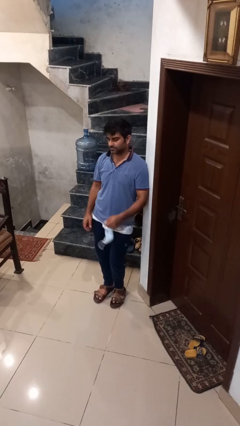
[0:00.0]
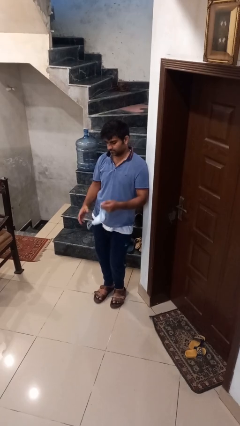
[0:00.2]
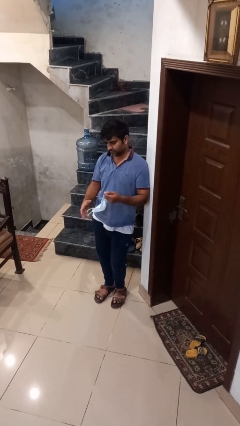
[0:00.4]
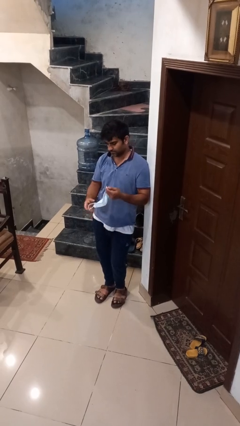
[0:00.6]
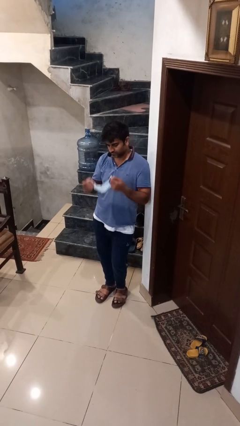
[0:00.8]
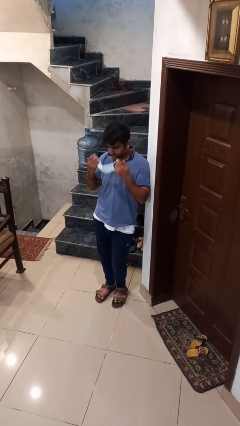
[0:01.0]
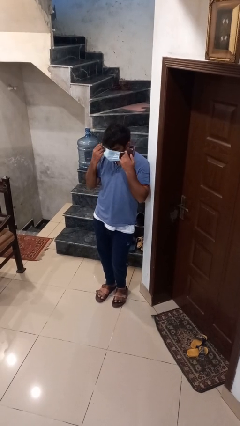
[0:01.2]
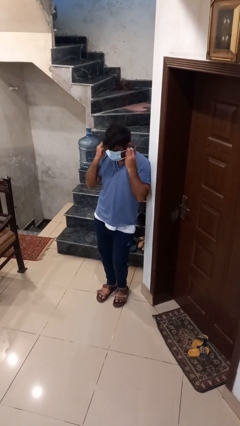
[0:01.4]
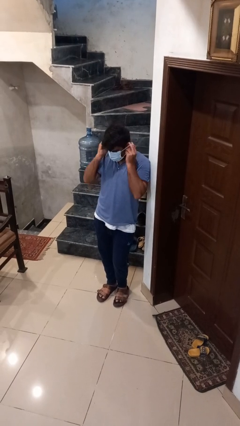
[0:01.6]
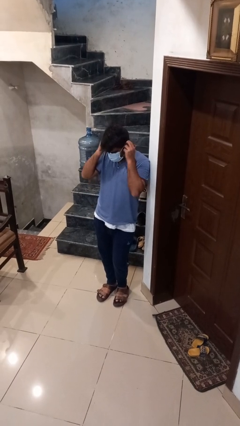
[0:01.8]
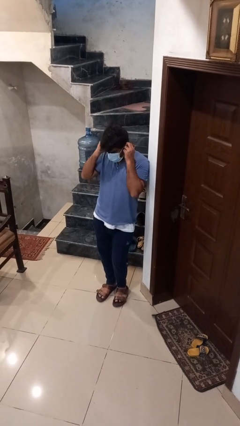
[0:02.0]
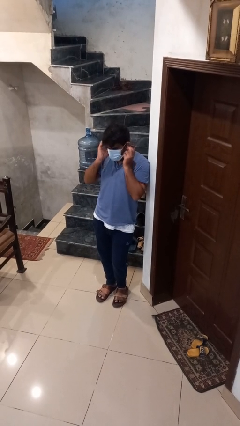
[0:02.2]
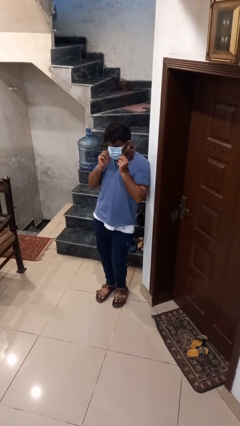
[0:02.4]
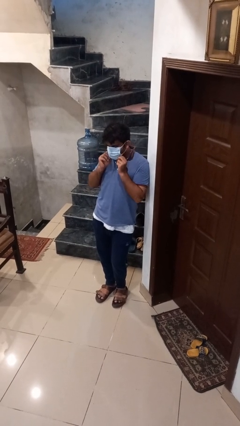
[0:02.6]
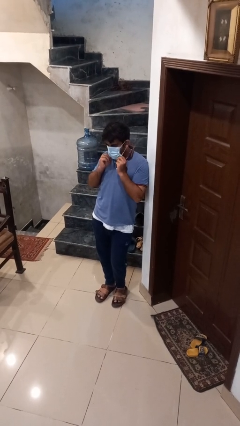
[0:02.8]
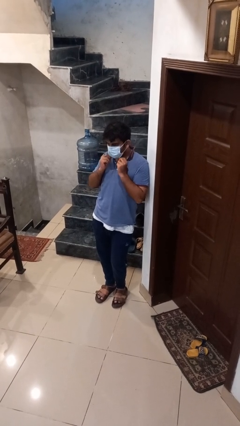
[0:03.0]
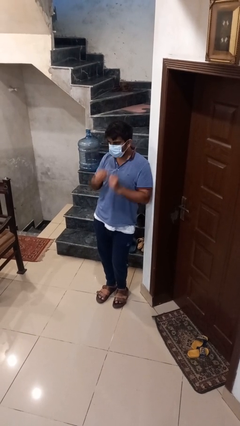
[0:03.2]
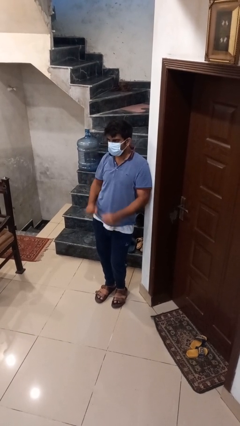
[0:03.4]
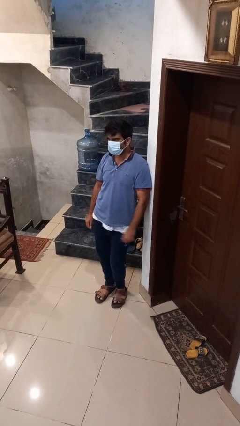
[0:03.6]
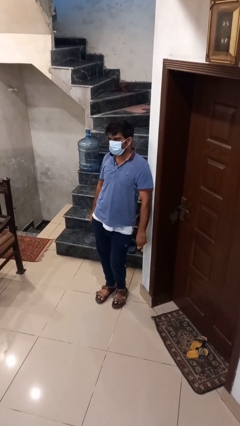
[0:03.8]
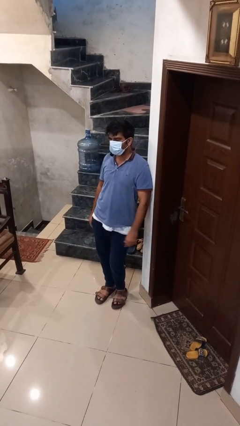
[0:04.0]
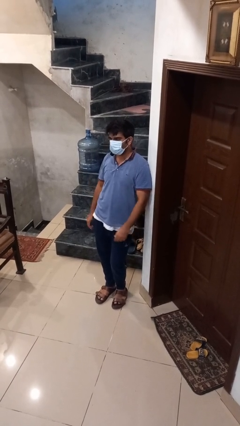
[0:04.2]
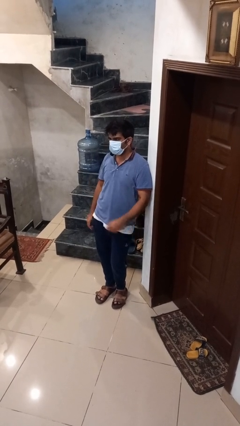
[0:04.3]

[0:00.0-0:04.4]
person puts on facemask

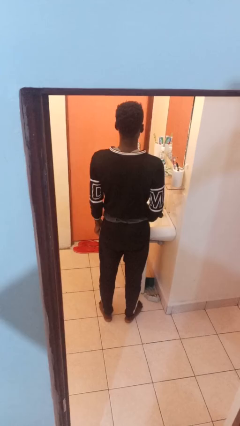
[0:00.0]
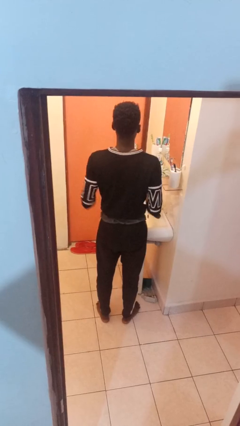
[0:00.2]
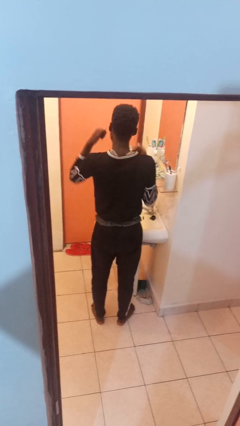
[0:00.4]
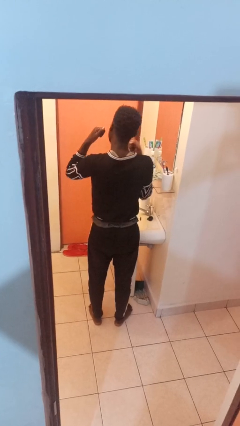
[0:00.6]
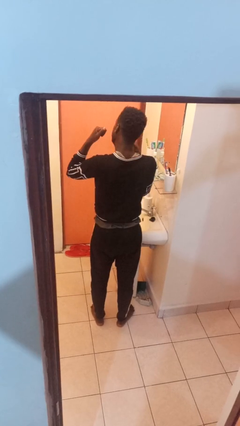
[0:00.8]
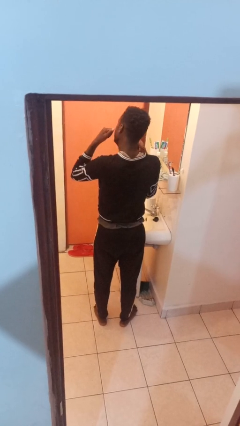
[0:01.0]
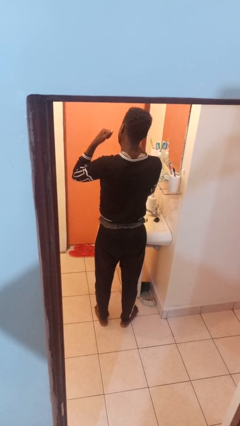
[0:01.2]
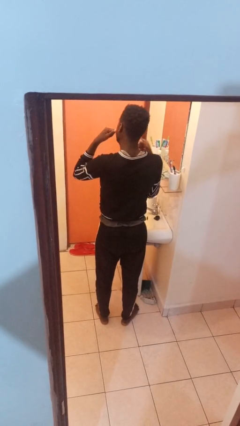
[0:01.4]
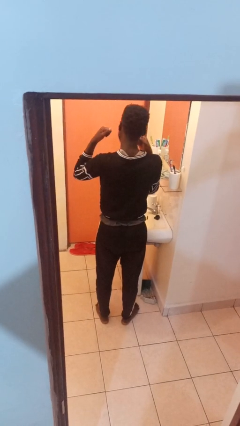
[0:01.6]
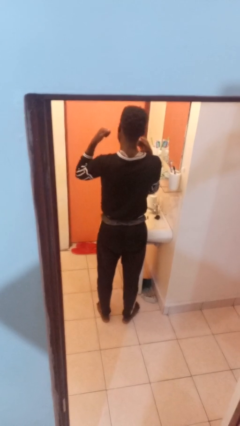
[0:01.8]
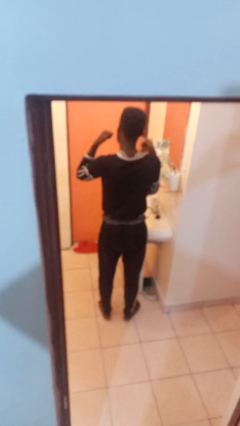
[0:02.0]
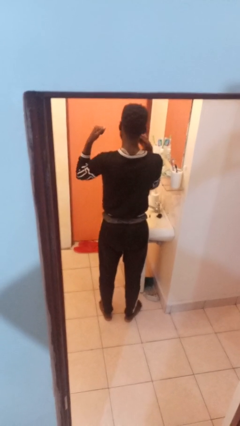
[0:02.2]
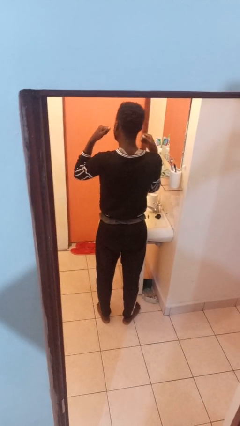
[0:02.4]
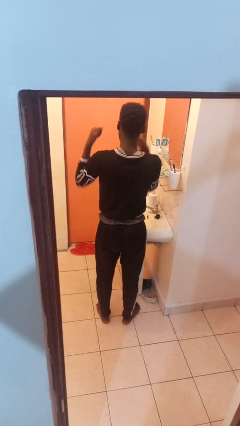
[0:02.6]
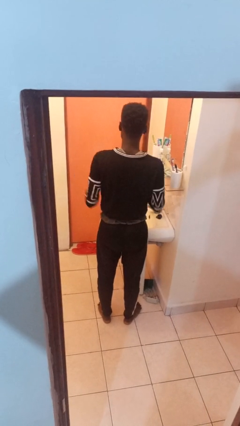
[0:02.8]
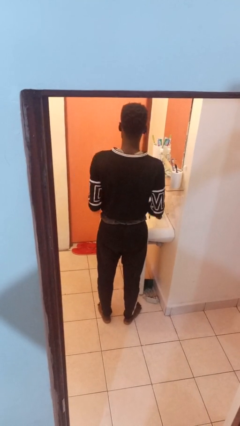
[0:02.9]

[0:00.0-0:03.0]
person flosses

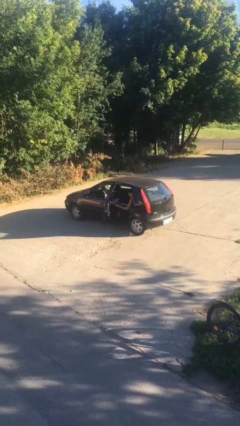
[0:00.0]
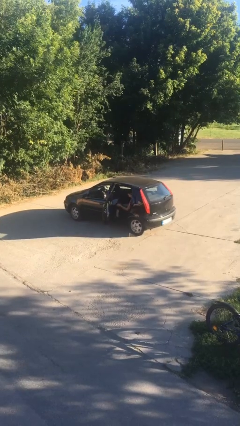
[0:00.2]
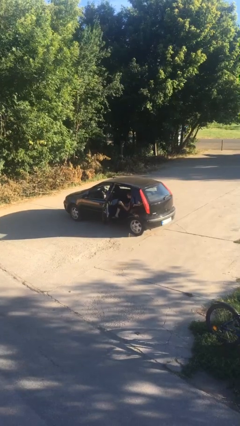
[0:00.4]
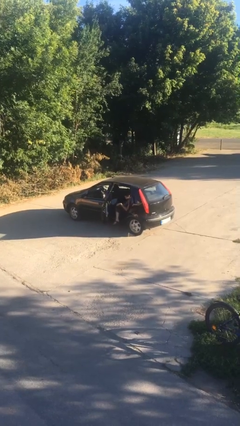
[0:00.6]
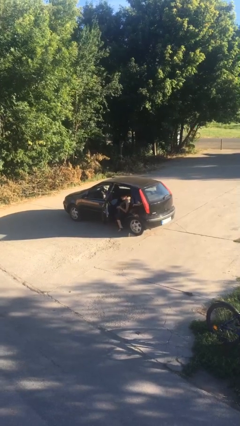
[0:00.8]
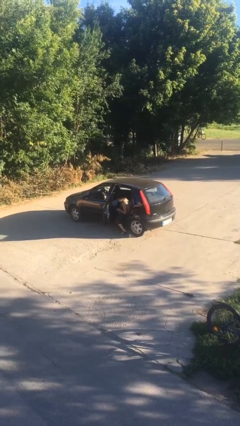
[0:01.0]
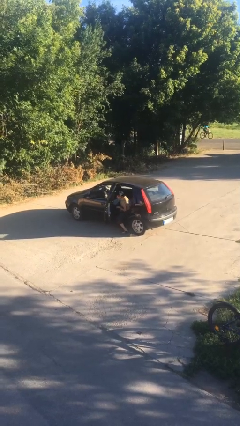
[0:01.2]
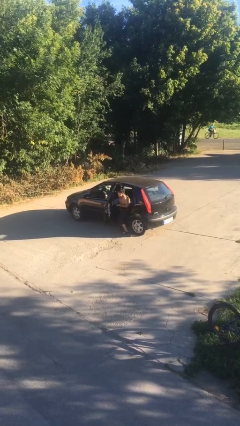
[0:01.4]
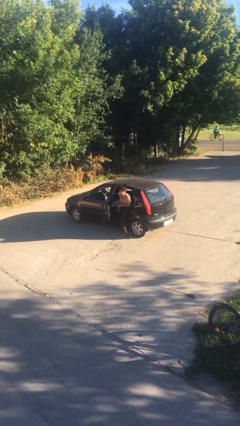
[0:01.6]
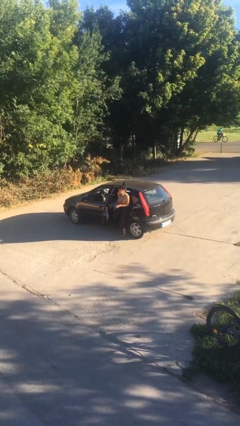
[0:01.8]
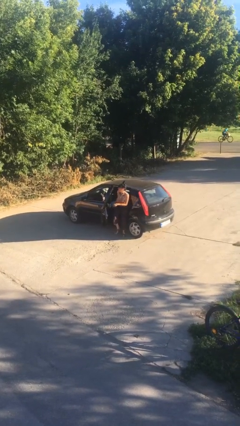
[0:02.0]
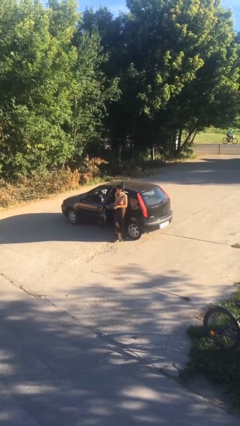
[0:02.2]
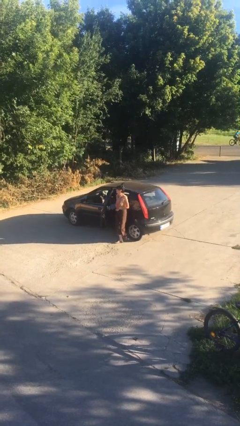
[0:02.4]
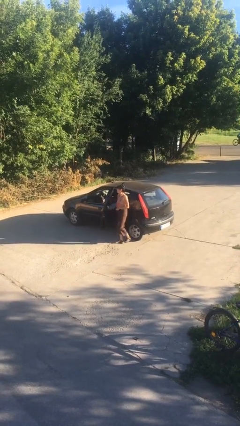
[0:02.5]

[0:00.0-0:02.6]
person exits car

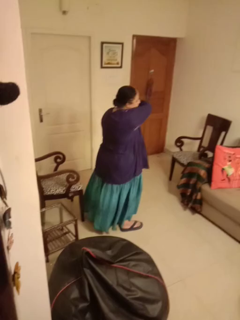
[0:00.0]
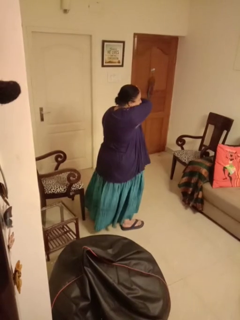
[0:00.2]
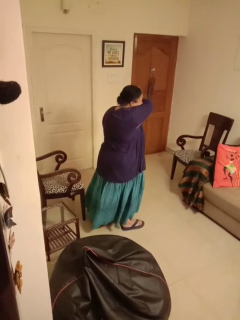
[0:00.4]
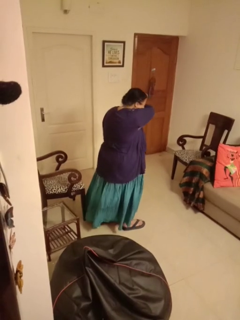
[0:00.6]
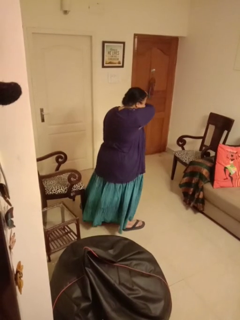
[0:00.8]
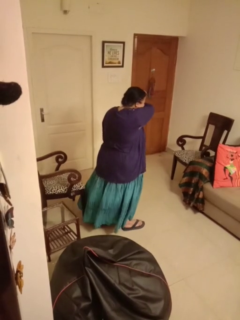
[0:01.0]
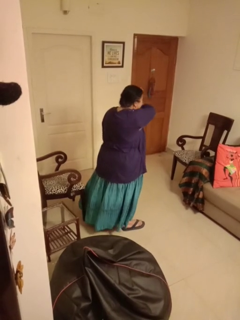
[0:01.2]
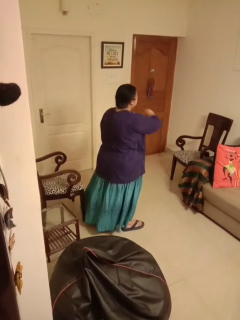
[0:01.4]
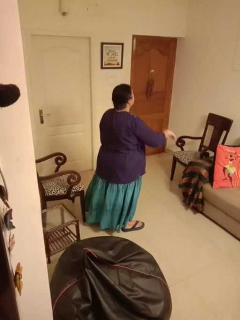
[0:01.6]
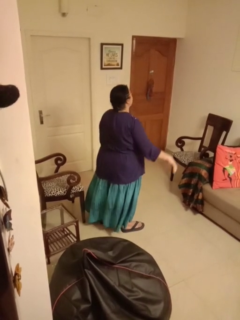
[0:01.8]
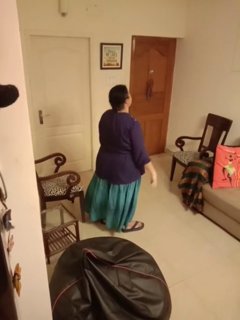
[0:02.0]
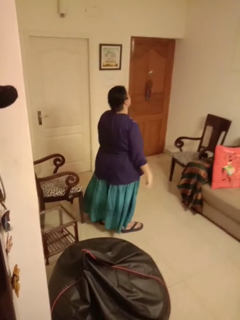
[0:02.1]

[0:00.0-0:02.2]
person sneezes into arm

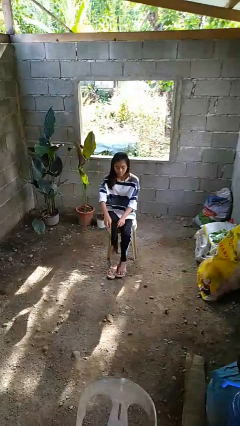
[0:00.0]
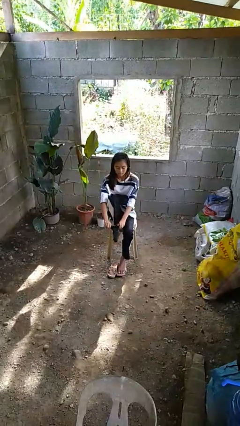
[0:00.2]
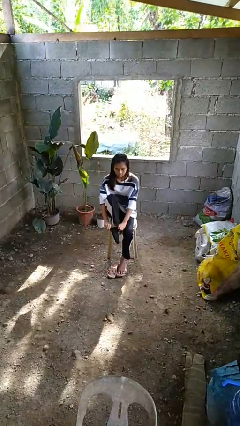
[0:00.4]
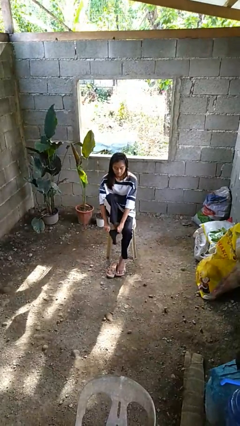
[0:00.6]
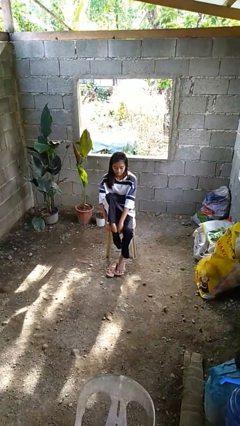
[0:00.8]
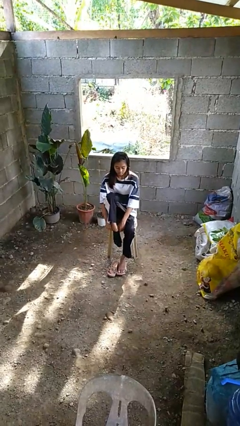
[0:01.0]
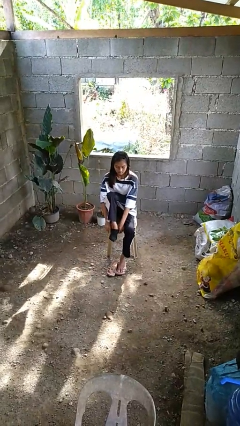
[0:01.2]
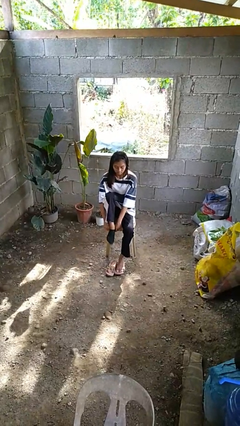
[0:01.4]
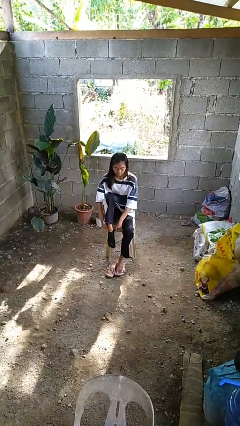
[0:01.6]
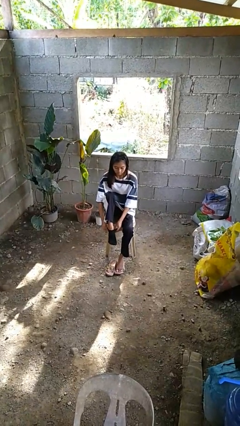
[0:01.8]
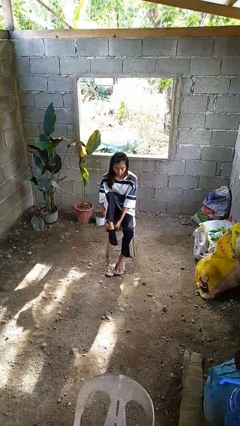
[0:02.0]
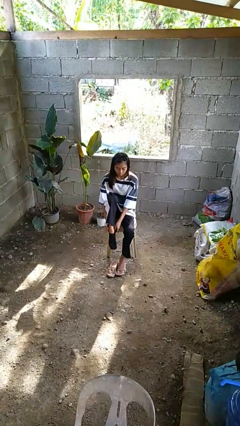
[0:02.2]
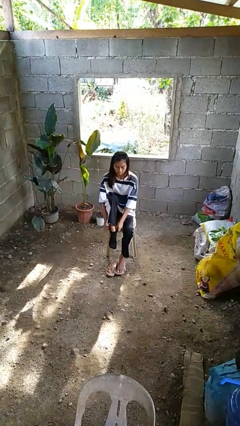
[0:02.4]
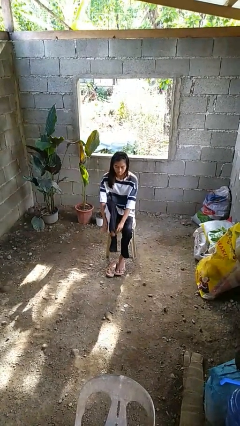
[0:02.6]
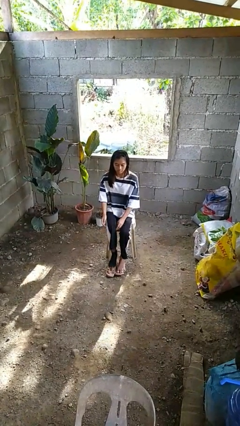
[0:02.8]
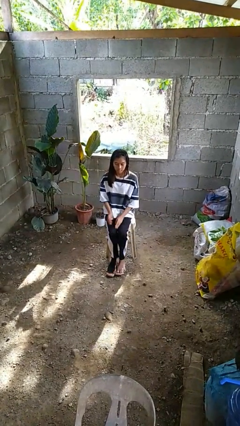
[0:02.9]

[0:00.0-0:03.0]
person puts on socks

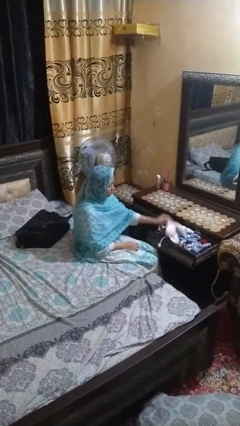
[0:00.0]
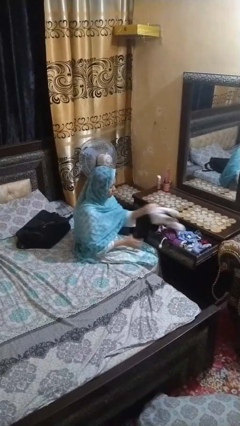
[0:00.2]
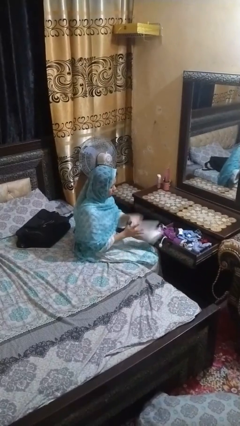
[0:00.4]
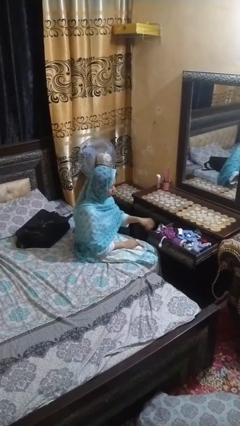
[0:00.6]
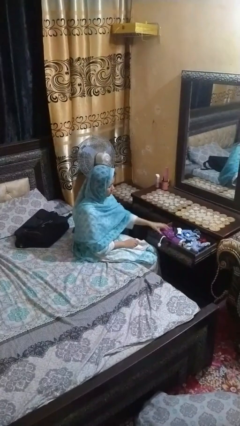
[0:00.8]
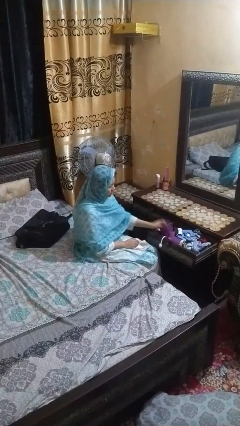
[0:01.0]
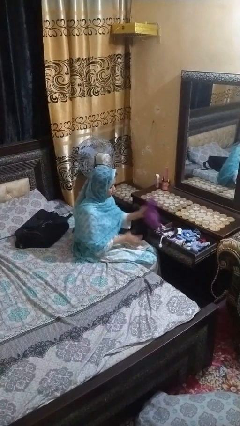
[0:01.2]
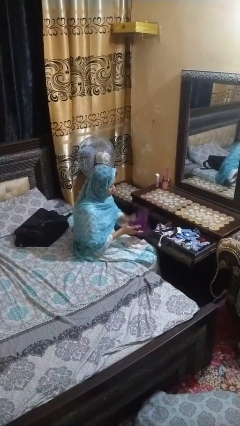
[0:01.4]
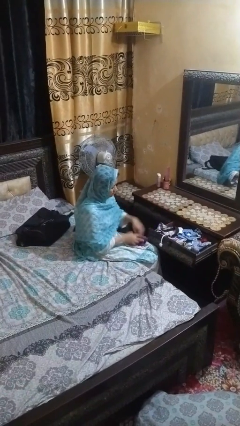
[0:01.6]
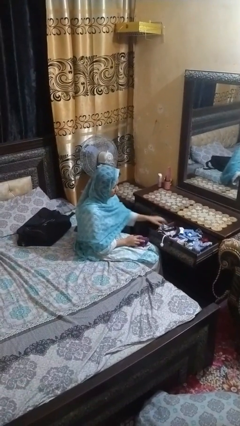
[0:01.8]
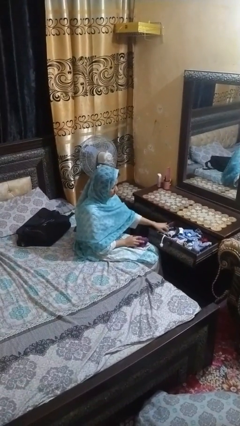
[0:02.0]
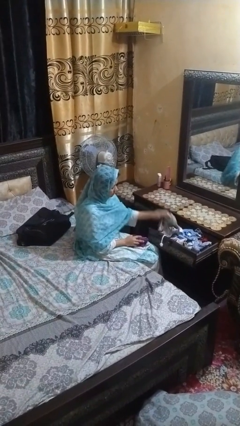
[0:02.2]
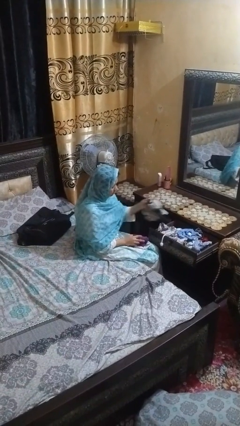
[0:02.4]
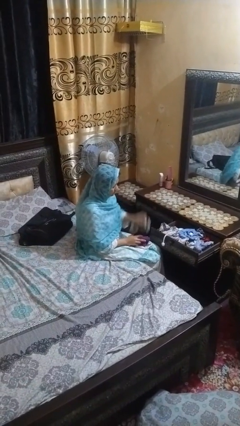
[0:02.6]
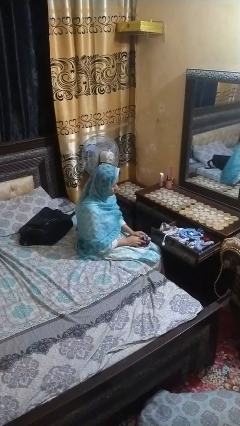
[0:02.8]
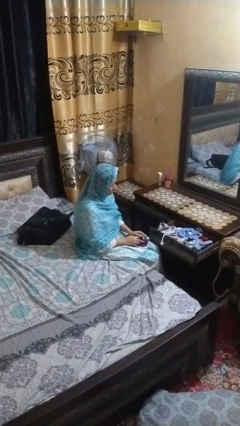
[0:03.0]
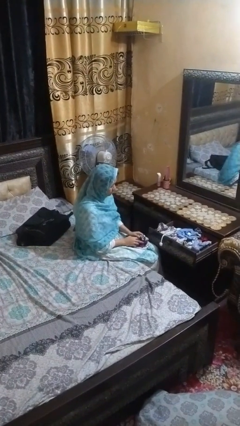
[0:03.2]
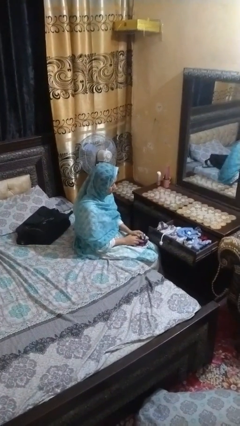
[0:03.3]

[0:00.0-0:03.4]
person takes clothes from dresser
